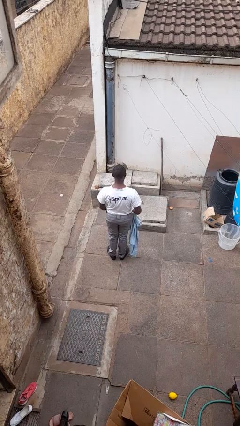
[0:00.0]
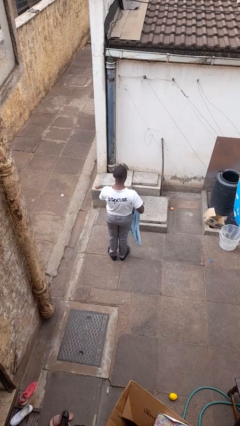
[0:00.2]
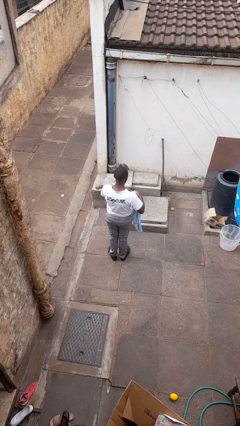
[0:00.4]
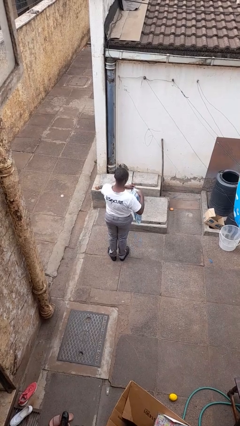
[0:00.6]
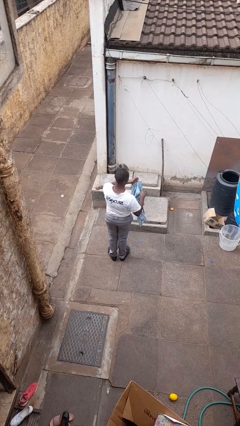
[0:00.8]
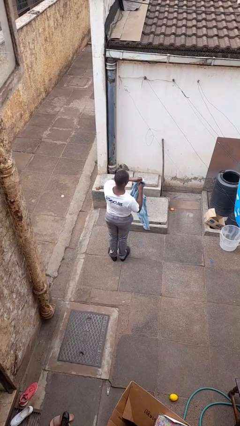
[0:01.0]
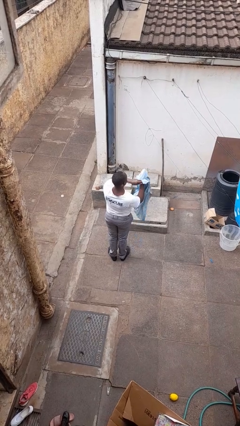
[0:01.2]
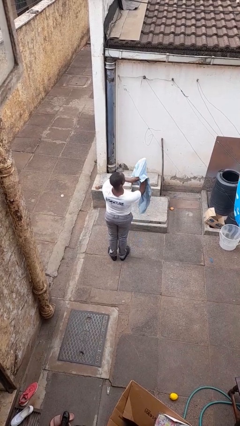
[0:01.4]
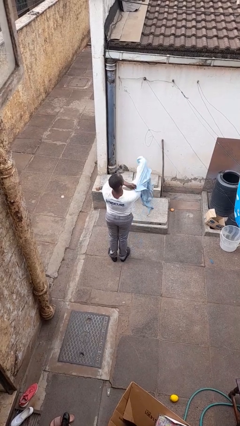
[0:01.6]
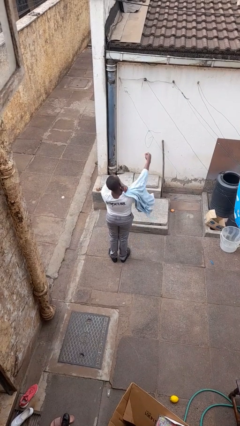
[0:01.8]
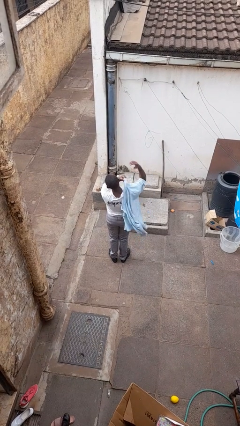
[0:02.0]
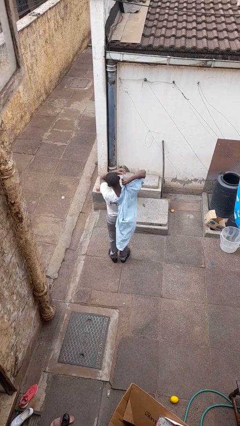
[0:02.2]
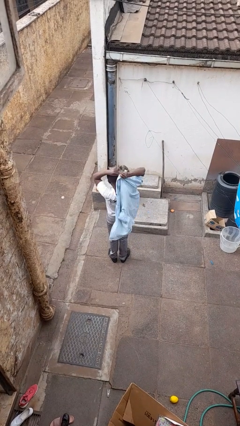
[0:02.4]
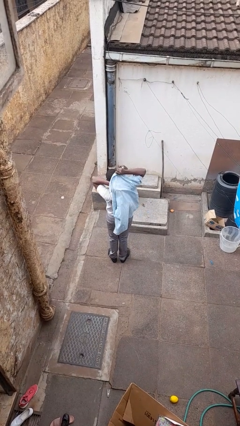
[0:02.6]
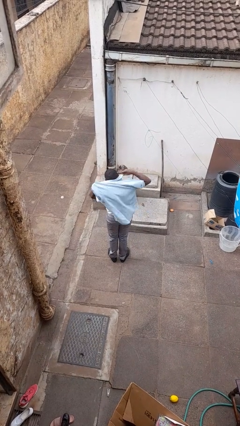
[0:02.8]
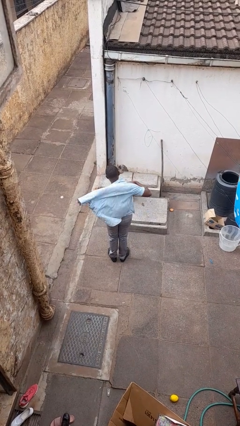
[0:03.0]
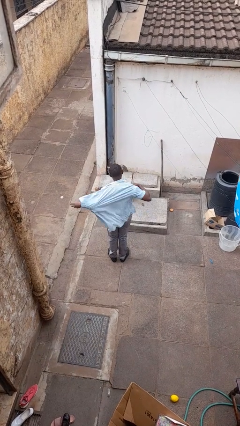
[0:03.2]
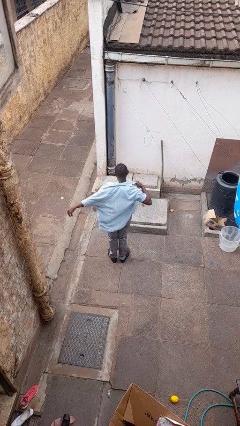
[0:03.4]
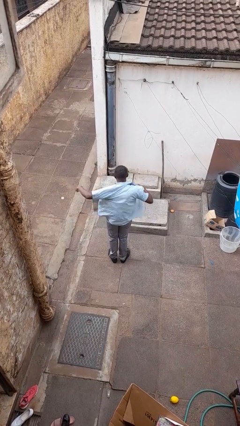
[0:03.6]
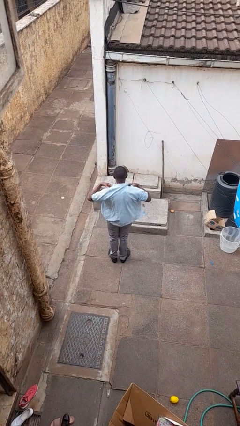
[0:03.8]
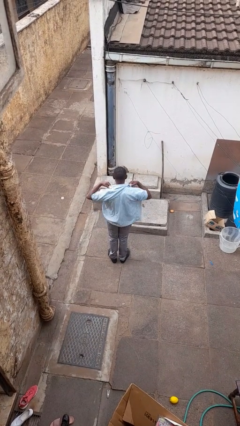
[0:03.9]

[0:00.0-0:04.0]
person puts on shirt

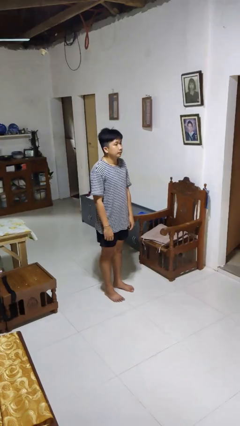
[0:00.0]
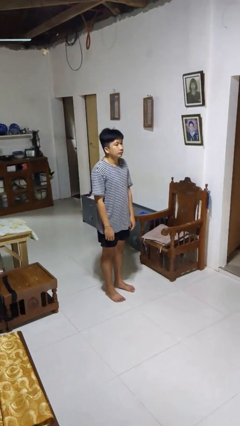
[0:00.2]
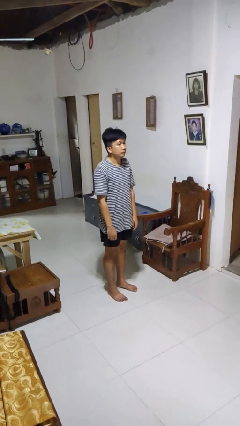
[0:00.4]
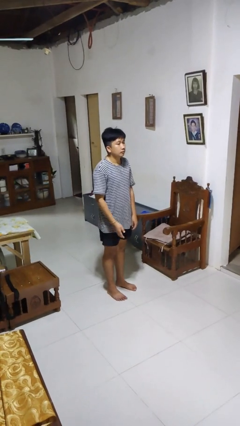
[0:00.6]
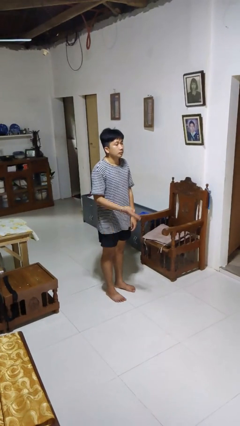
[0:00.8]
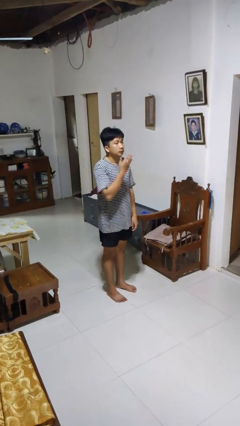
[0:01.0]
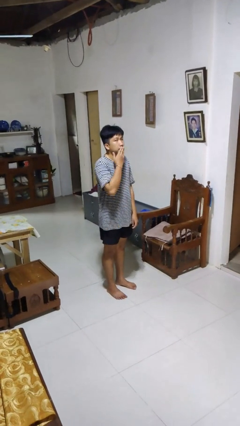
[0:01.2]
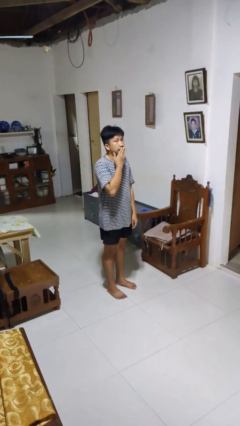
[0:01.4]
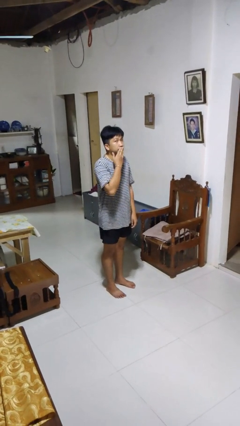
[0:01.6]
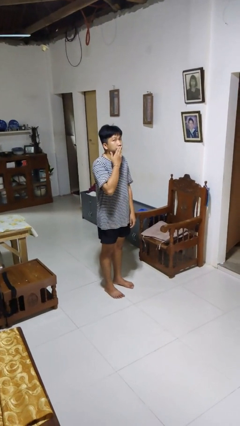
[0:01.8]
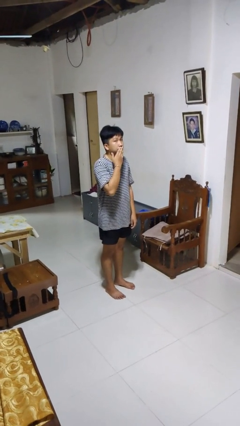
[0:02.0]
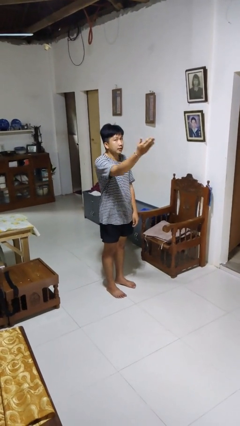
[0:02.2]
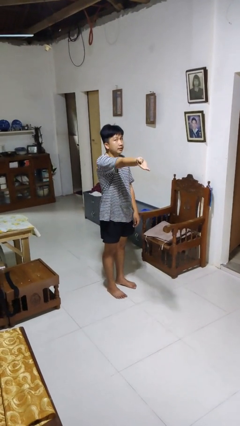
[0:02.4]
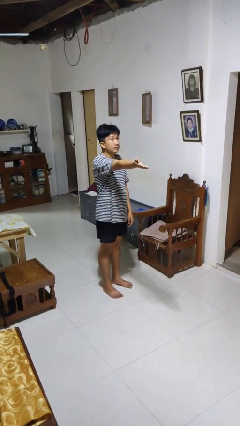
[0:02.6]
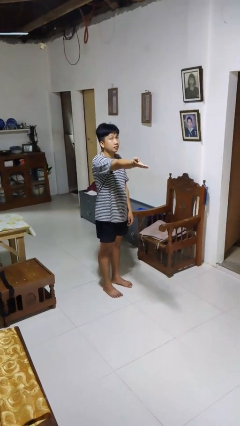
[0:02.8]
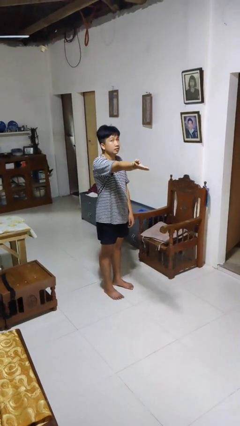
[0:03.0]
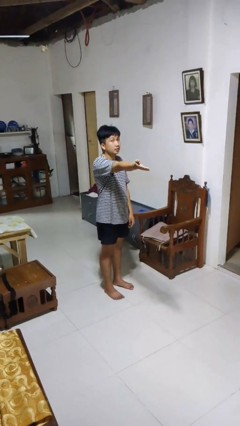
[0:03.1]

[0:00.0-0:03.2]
person gestures blow kiss

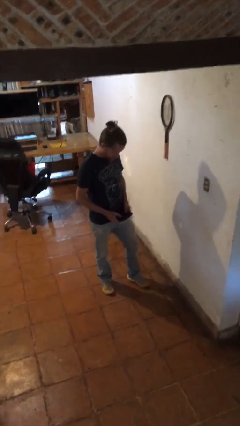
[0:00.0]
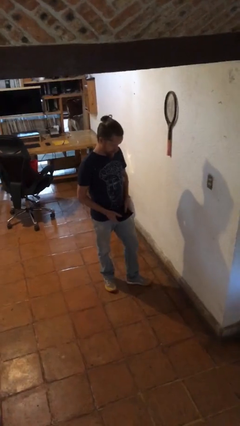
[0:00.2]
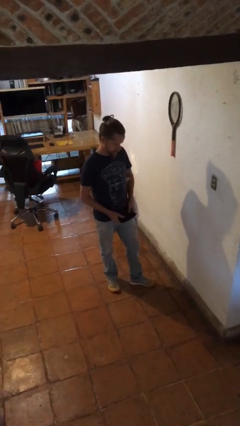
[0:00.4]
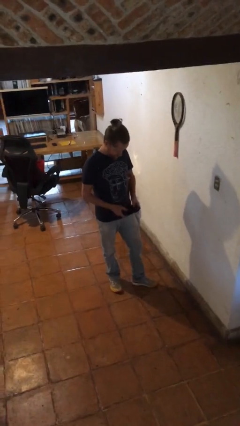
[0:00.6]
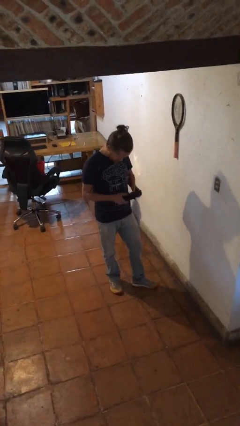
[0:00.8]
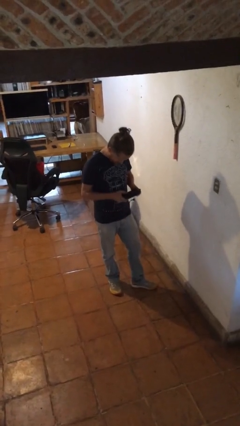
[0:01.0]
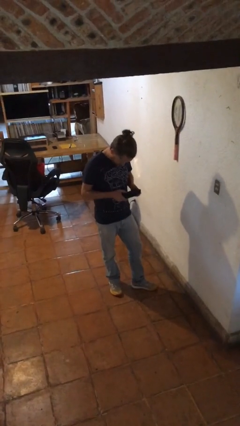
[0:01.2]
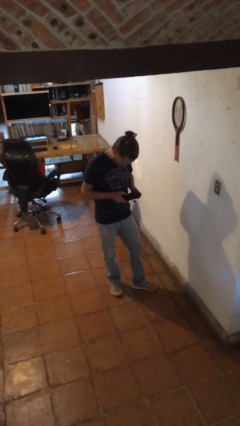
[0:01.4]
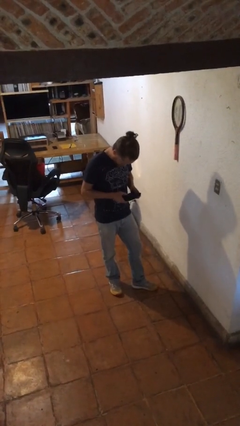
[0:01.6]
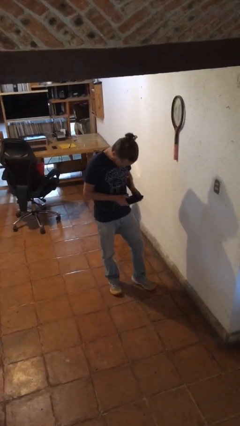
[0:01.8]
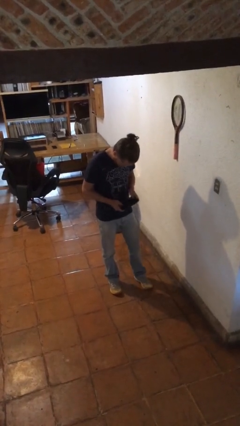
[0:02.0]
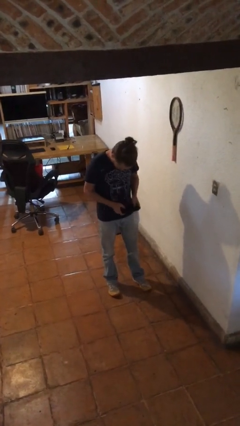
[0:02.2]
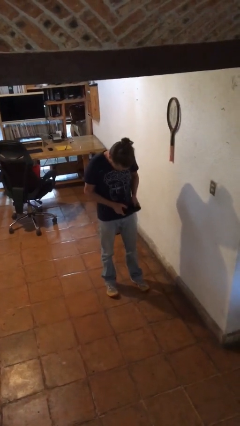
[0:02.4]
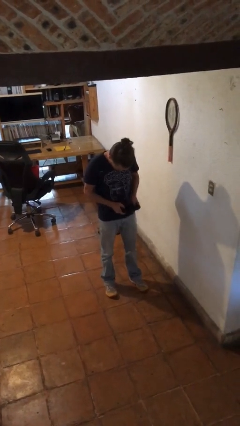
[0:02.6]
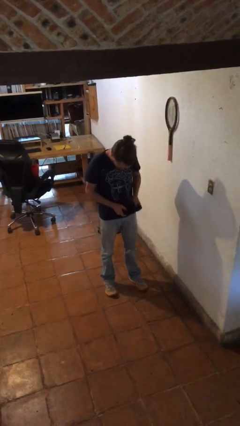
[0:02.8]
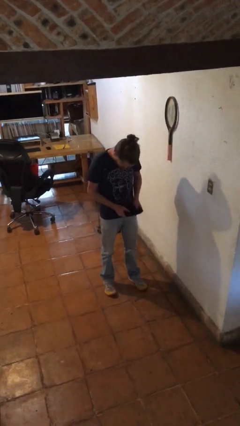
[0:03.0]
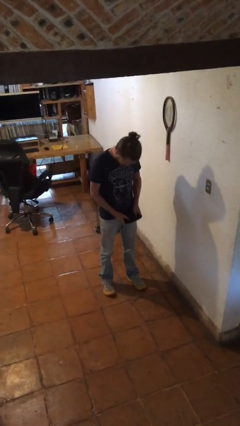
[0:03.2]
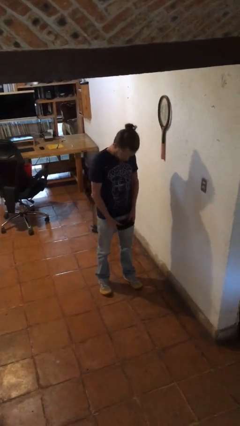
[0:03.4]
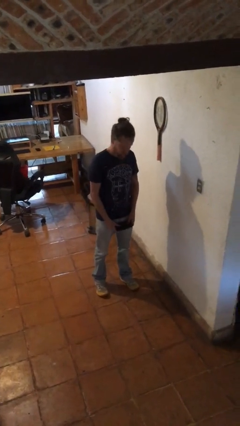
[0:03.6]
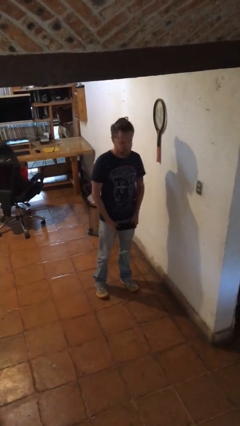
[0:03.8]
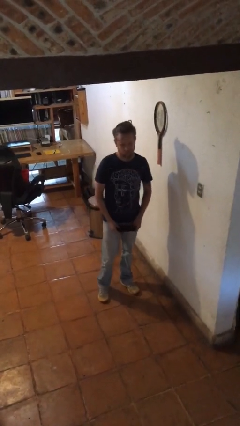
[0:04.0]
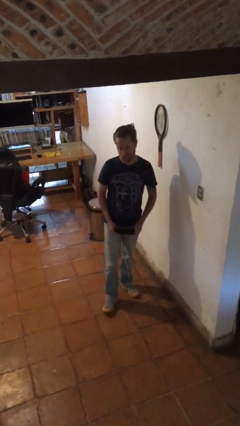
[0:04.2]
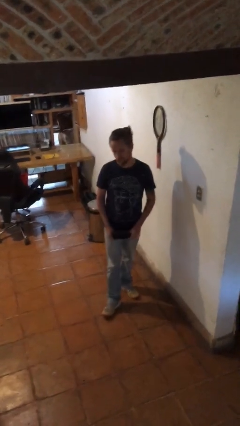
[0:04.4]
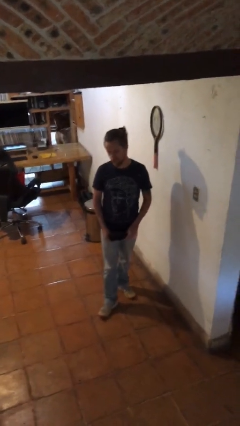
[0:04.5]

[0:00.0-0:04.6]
person interacts with handheld game

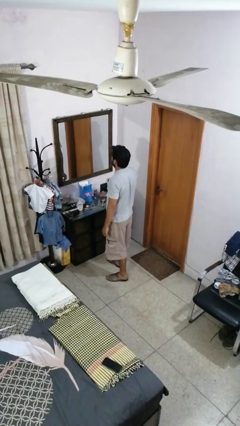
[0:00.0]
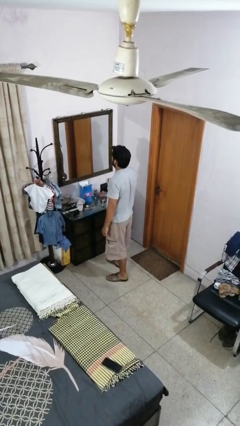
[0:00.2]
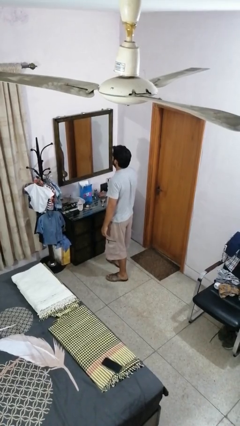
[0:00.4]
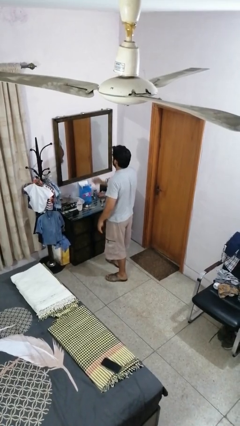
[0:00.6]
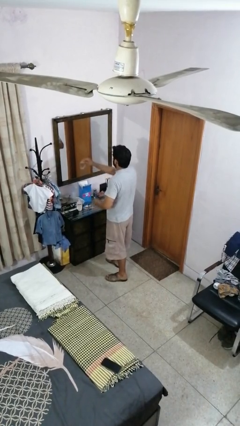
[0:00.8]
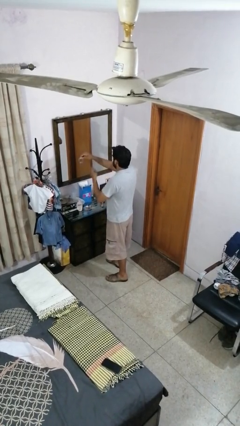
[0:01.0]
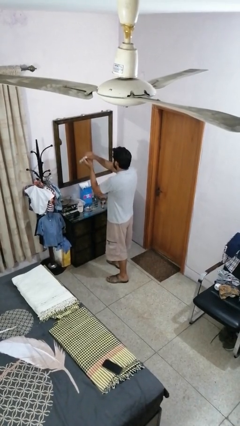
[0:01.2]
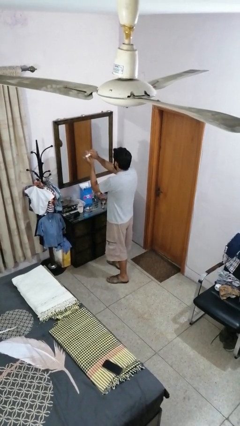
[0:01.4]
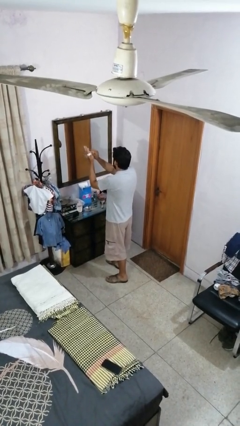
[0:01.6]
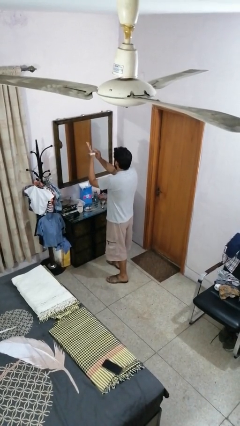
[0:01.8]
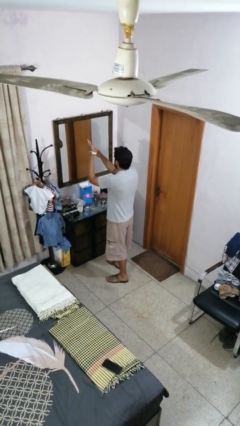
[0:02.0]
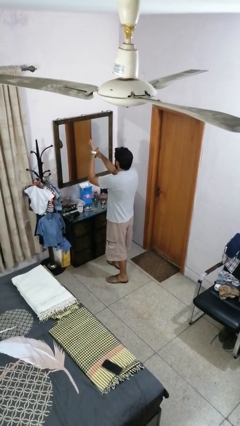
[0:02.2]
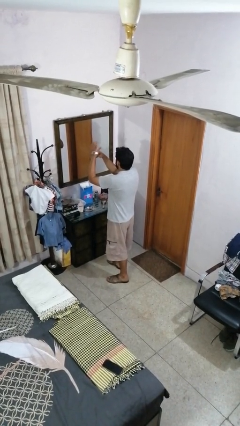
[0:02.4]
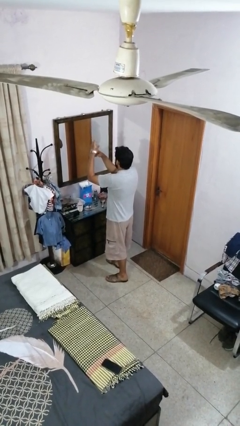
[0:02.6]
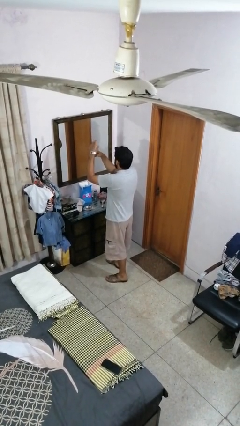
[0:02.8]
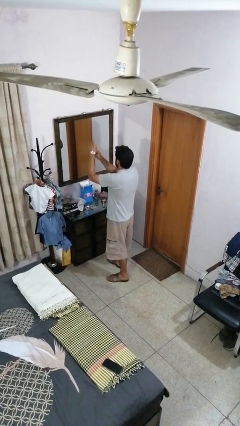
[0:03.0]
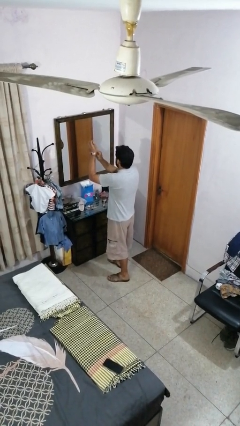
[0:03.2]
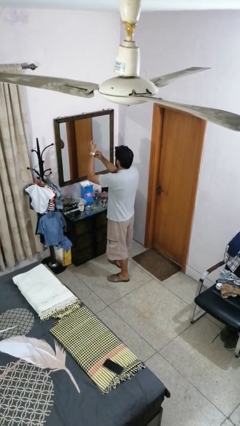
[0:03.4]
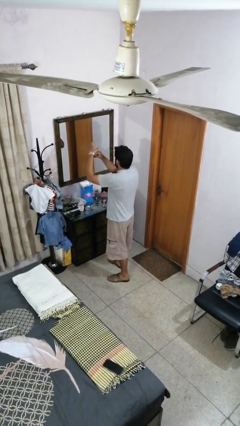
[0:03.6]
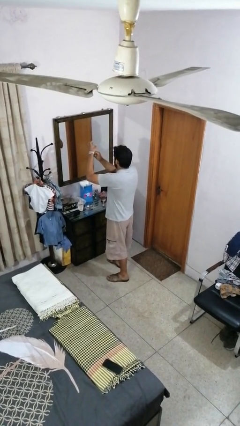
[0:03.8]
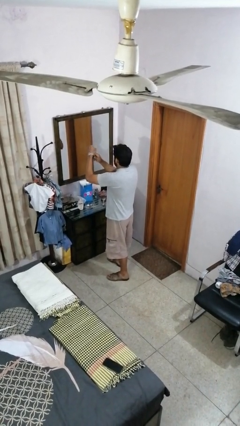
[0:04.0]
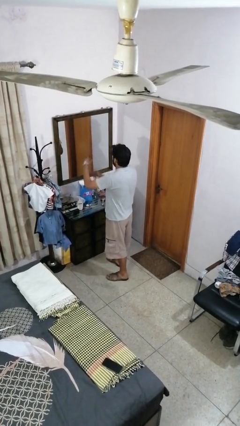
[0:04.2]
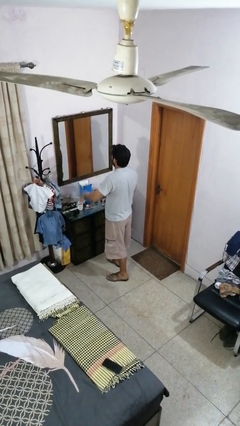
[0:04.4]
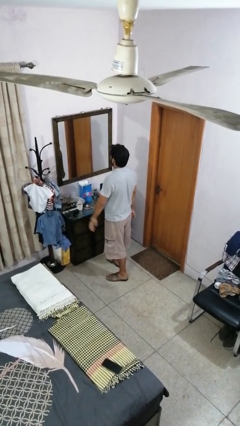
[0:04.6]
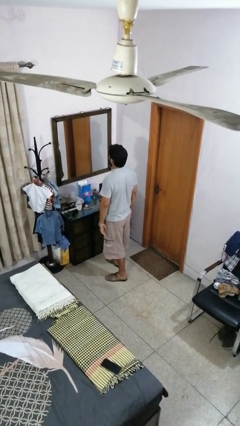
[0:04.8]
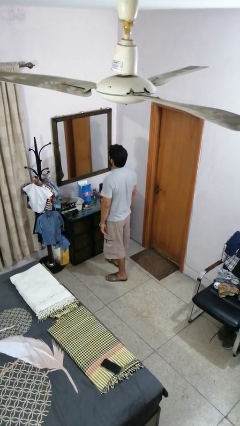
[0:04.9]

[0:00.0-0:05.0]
person puts on wristwatch

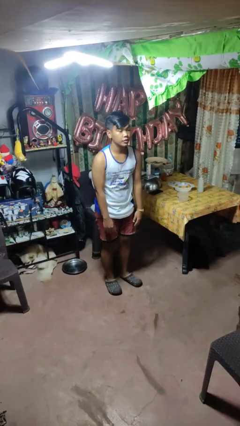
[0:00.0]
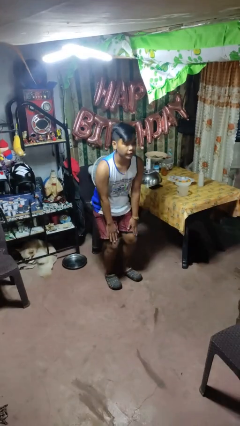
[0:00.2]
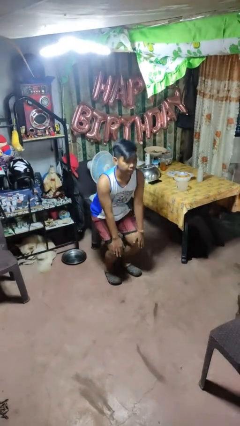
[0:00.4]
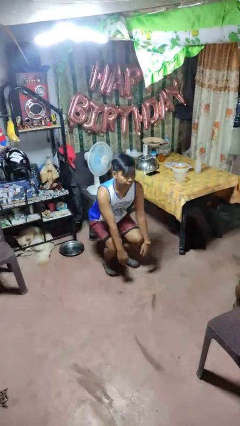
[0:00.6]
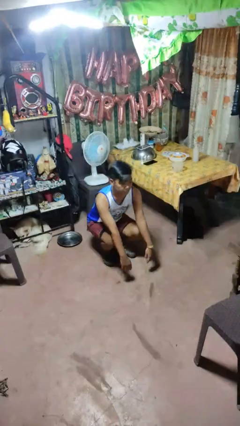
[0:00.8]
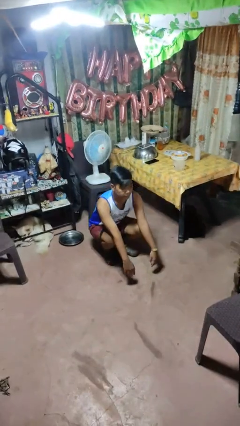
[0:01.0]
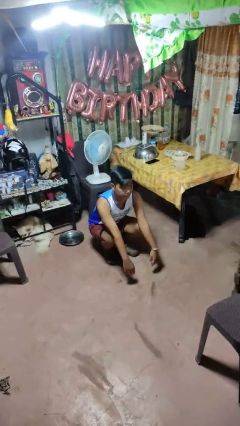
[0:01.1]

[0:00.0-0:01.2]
person squats
